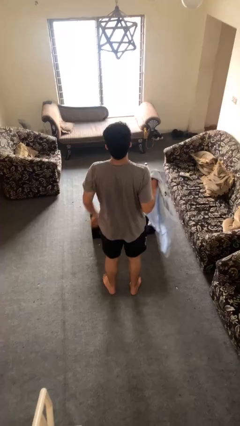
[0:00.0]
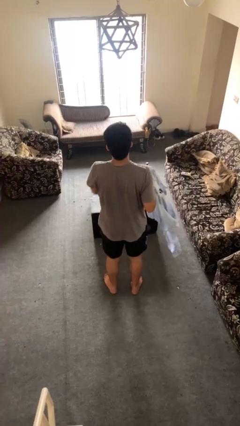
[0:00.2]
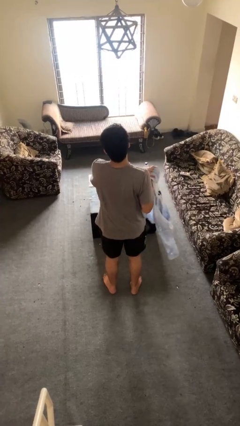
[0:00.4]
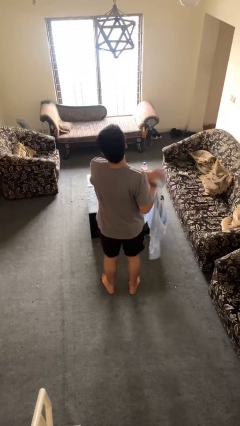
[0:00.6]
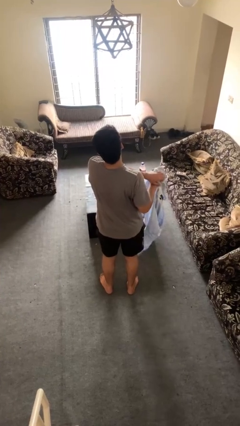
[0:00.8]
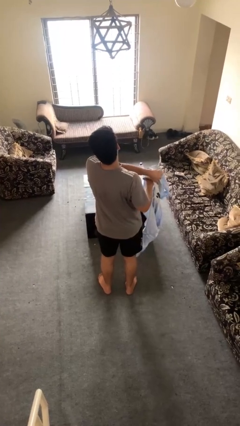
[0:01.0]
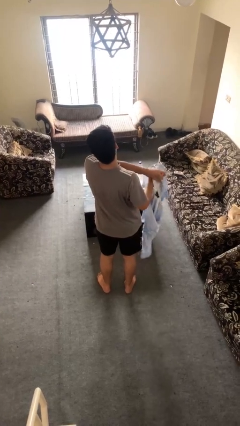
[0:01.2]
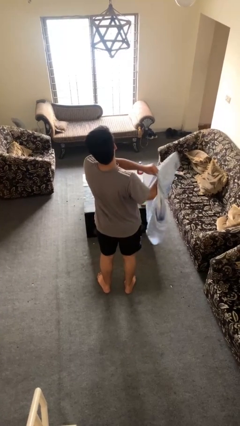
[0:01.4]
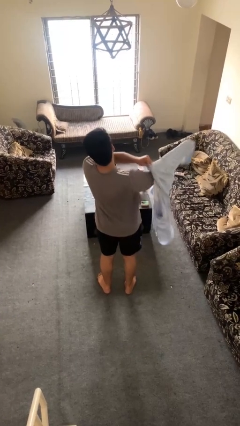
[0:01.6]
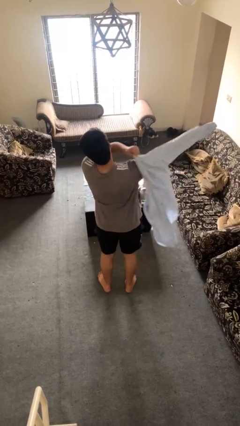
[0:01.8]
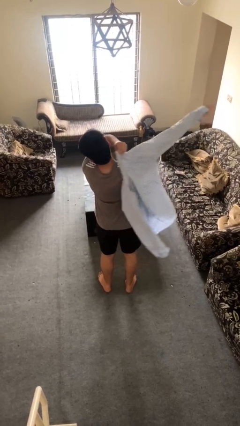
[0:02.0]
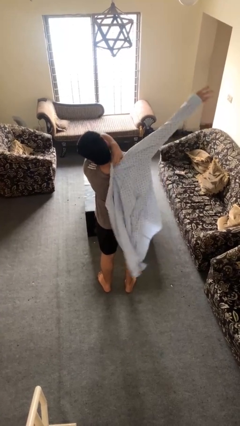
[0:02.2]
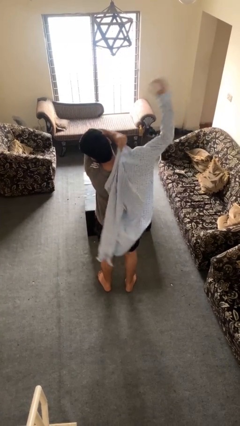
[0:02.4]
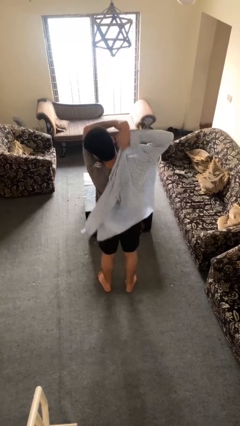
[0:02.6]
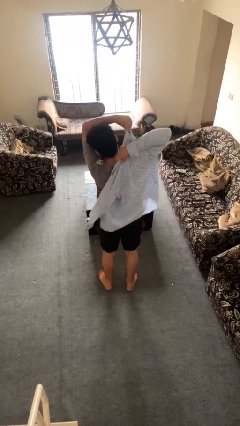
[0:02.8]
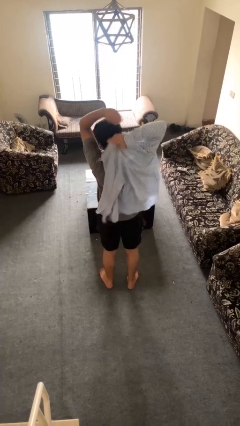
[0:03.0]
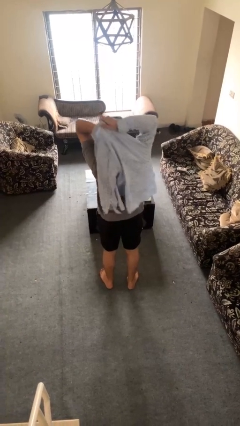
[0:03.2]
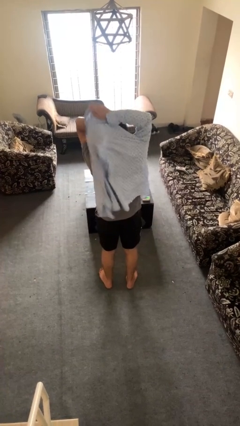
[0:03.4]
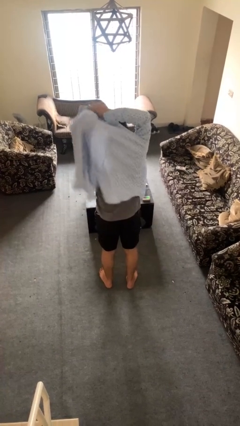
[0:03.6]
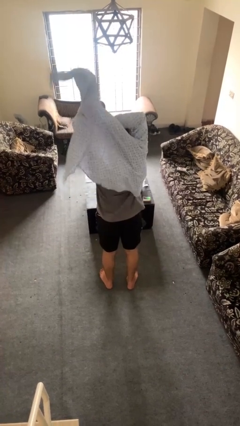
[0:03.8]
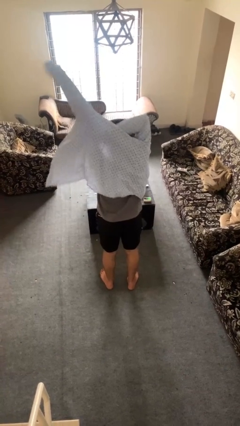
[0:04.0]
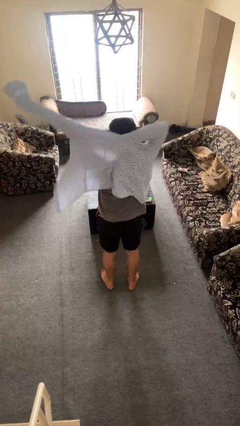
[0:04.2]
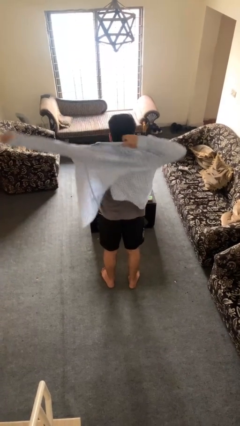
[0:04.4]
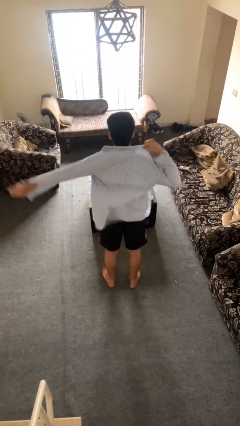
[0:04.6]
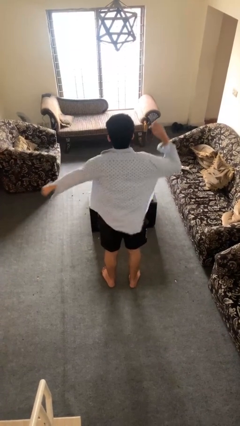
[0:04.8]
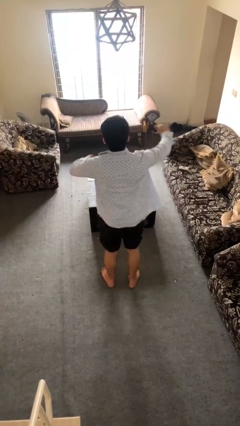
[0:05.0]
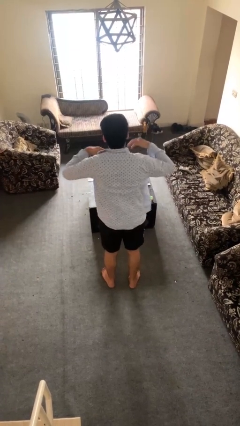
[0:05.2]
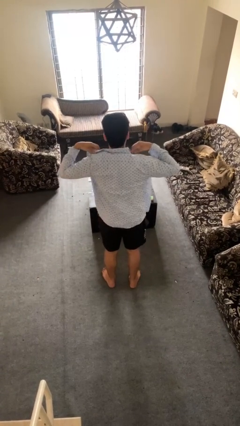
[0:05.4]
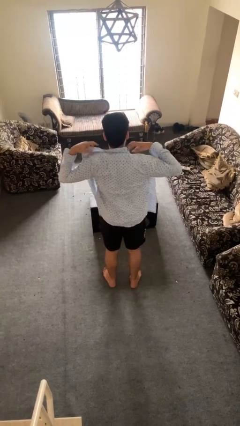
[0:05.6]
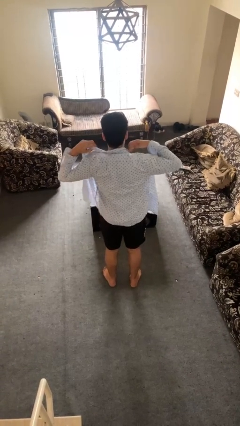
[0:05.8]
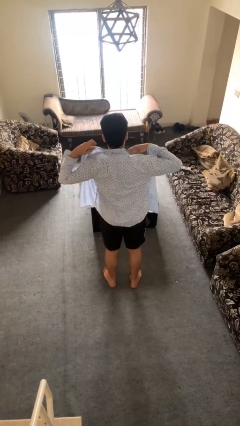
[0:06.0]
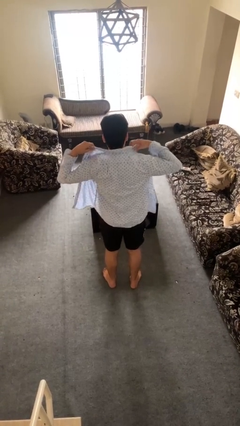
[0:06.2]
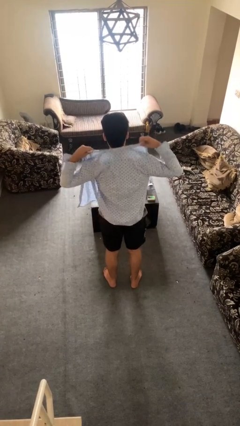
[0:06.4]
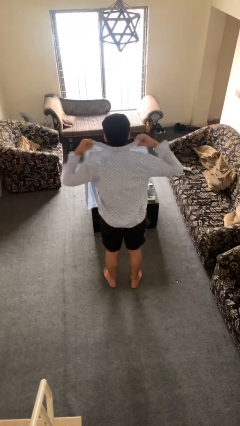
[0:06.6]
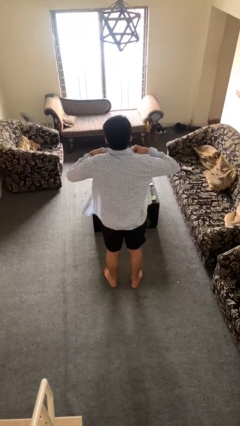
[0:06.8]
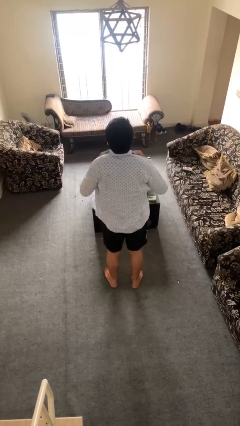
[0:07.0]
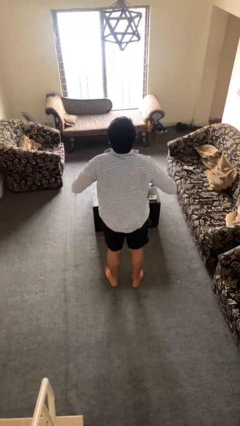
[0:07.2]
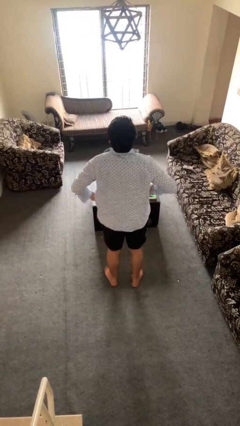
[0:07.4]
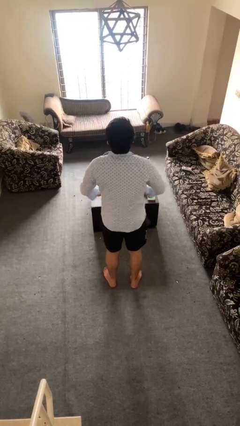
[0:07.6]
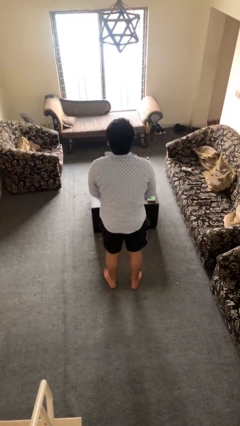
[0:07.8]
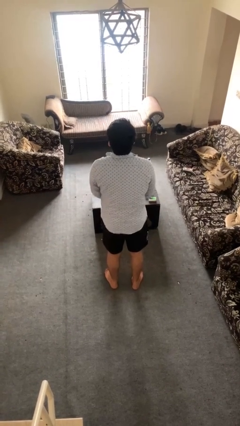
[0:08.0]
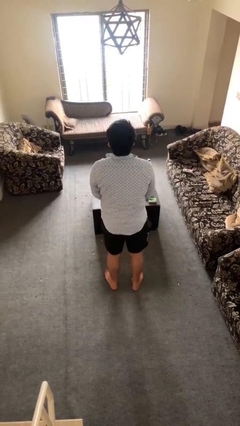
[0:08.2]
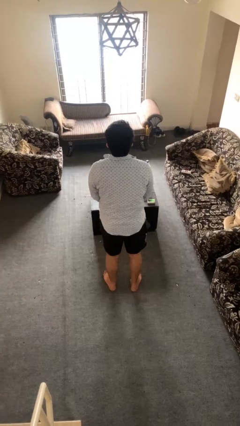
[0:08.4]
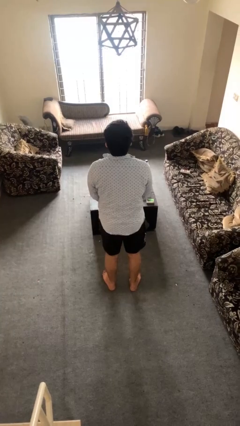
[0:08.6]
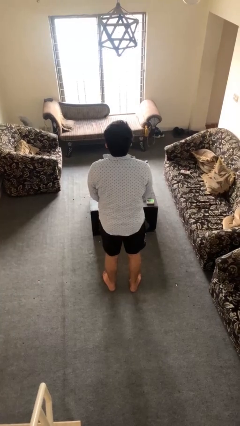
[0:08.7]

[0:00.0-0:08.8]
person puts on shirt

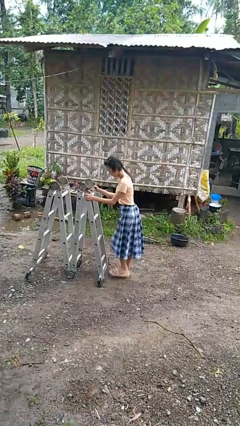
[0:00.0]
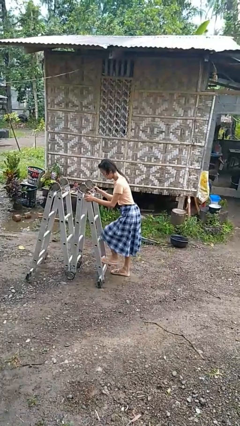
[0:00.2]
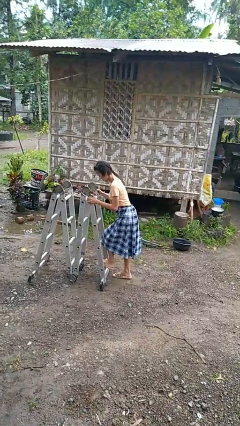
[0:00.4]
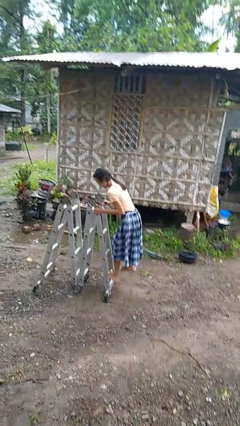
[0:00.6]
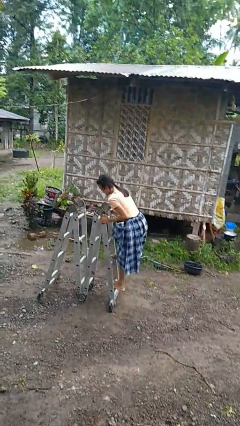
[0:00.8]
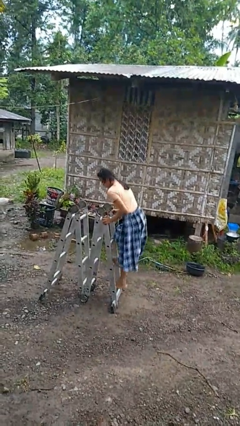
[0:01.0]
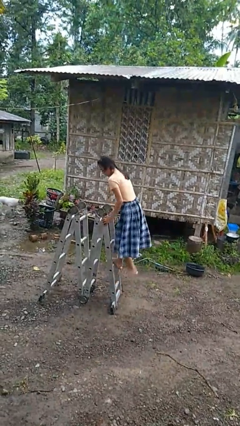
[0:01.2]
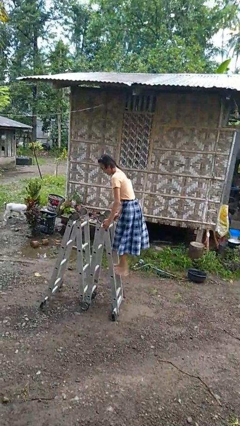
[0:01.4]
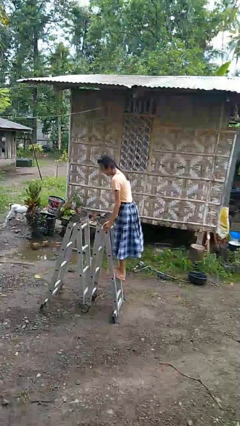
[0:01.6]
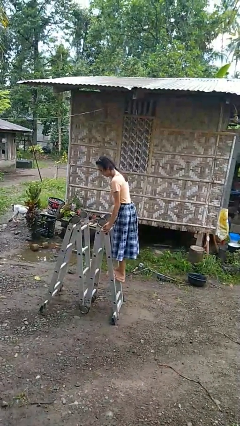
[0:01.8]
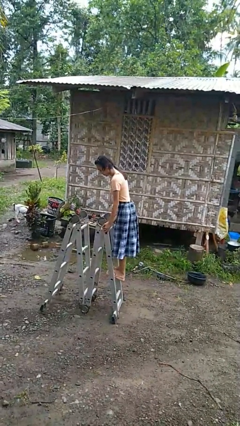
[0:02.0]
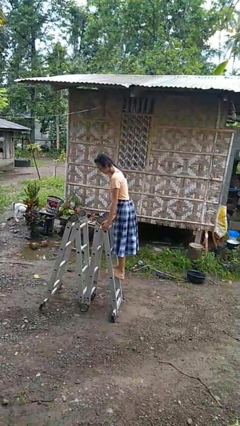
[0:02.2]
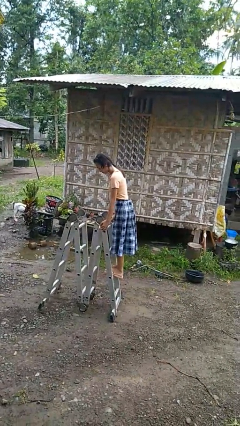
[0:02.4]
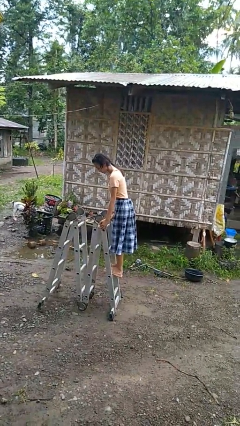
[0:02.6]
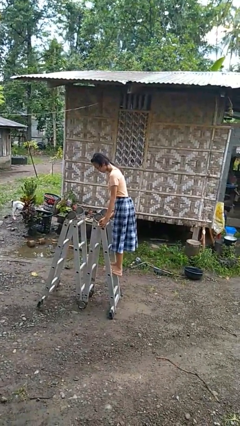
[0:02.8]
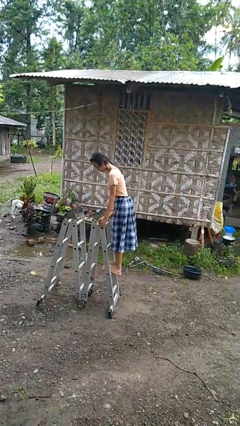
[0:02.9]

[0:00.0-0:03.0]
person climbs up ladder

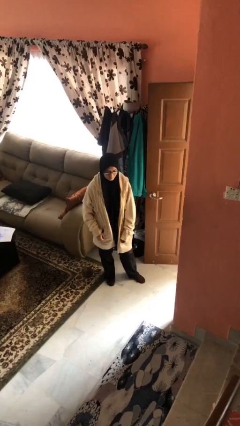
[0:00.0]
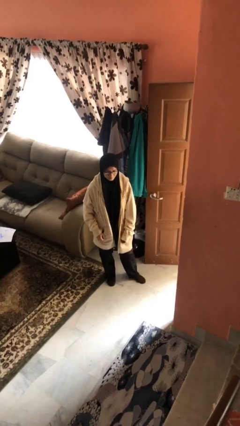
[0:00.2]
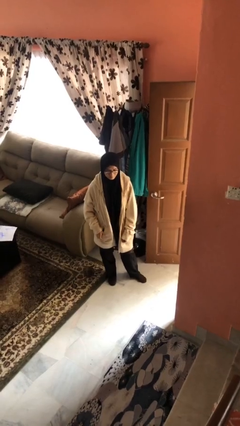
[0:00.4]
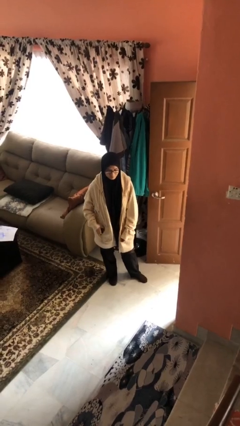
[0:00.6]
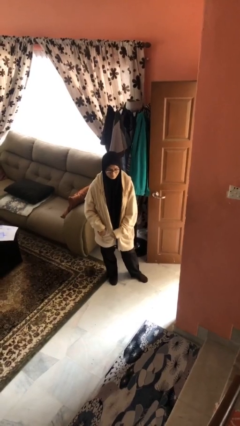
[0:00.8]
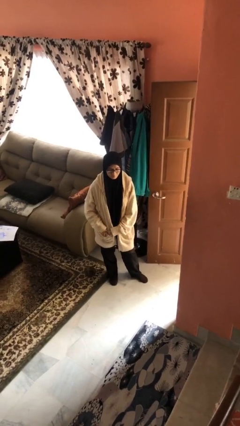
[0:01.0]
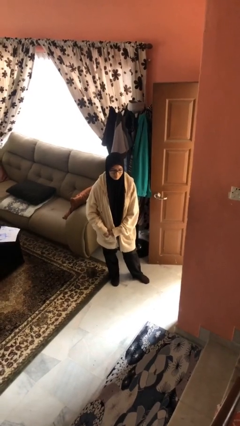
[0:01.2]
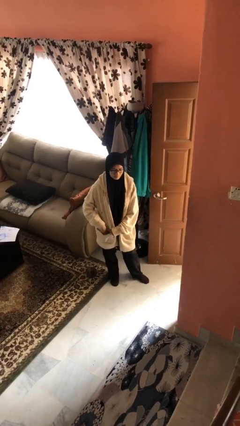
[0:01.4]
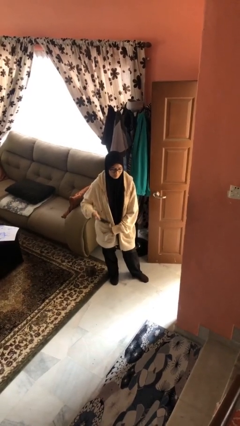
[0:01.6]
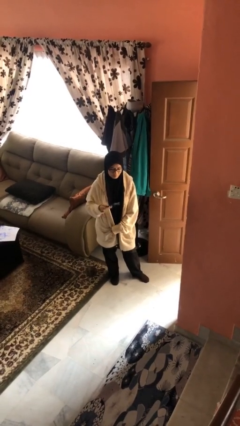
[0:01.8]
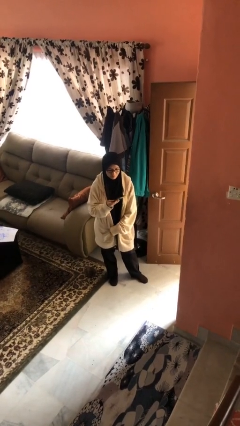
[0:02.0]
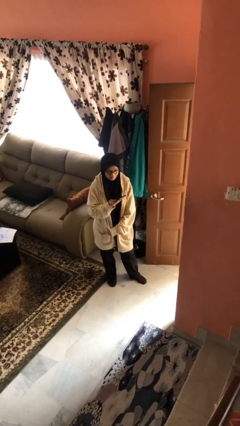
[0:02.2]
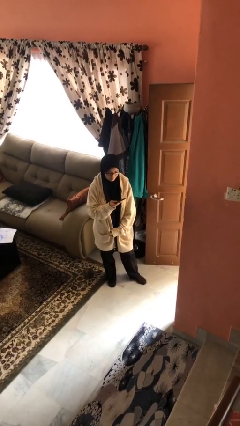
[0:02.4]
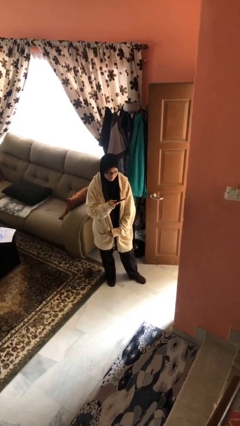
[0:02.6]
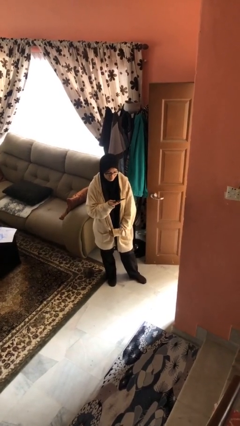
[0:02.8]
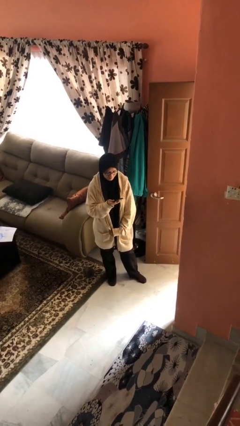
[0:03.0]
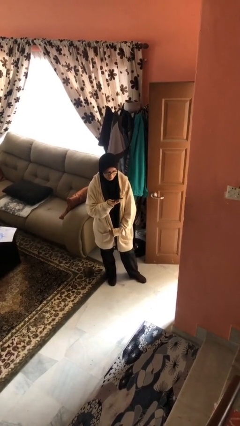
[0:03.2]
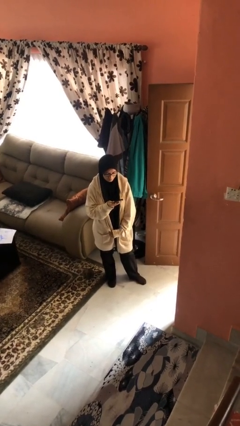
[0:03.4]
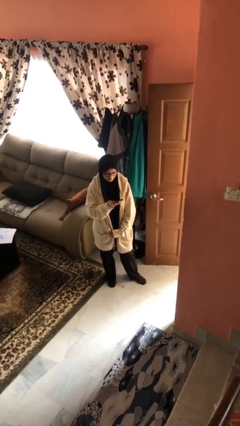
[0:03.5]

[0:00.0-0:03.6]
person takes phone from pocket

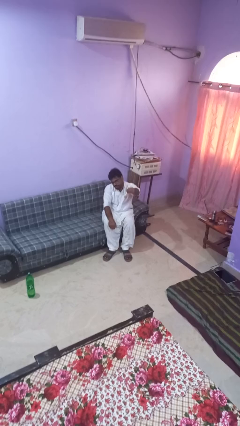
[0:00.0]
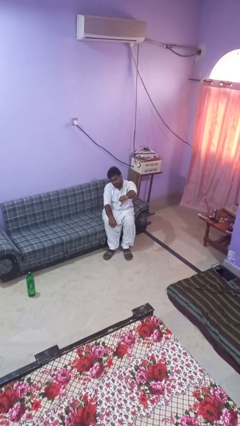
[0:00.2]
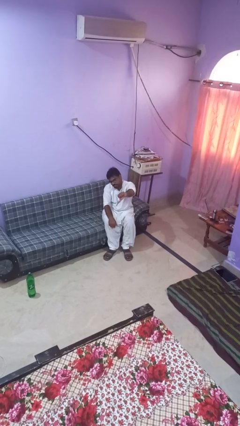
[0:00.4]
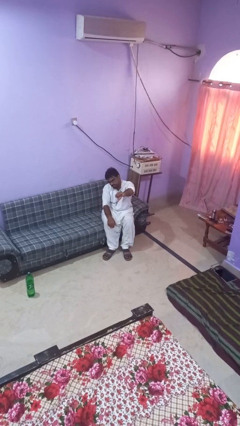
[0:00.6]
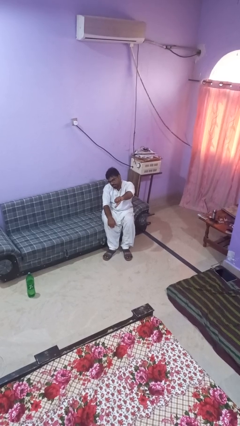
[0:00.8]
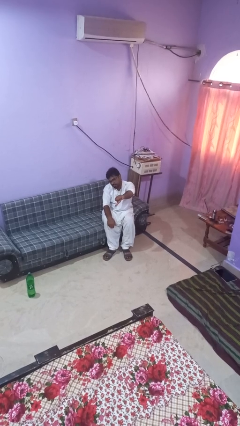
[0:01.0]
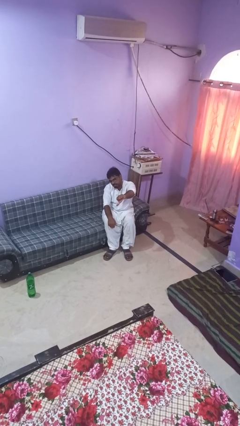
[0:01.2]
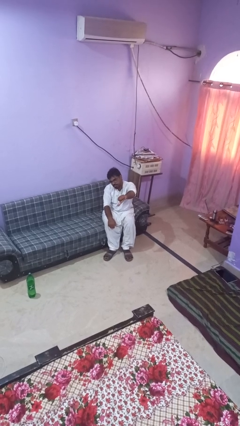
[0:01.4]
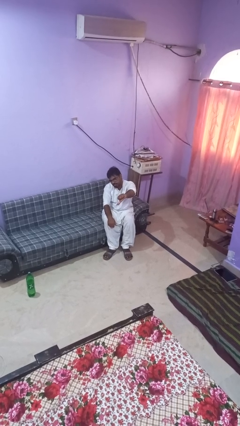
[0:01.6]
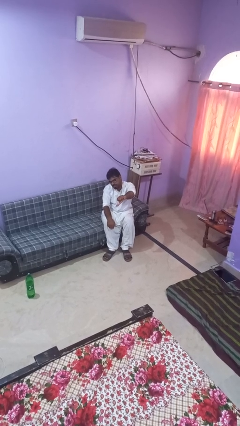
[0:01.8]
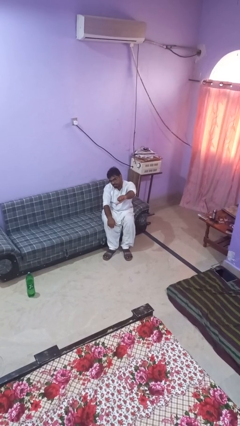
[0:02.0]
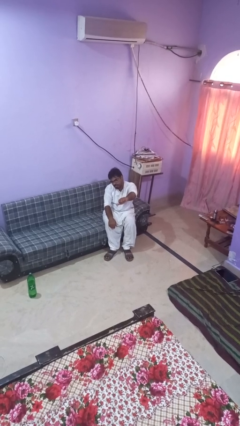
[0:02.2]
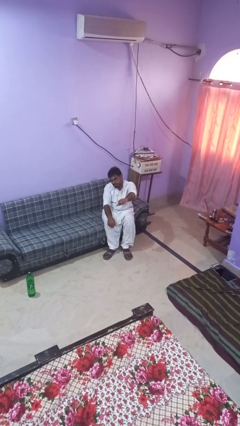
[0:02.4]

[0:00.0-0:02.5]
person gestures thumbs down
